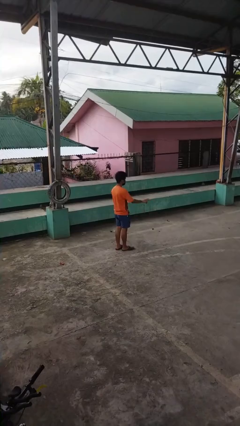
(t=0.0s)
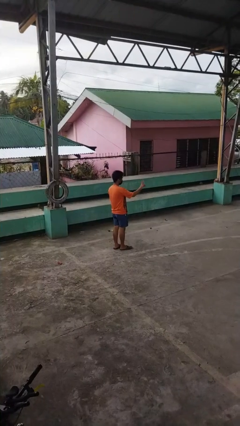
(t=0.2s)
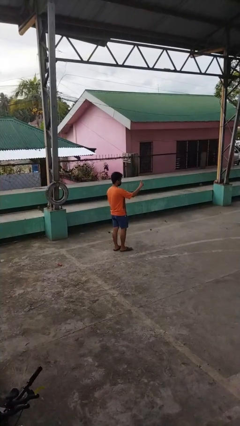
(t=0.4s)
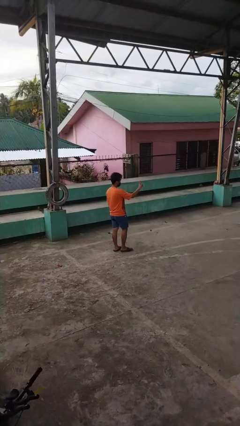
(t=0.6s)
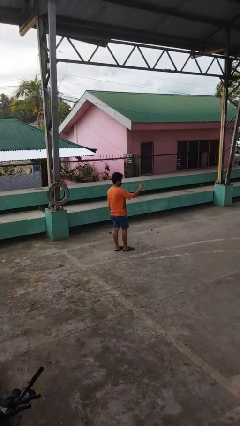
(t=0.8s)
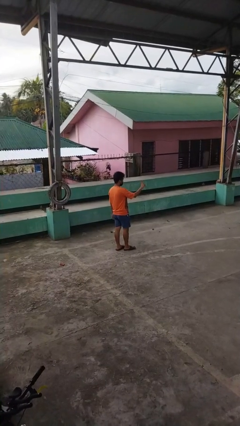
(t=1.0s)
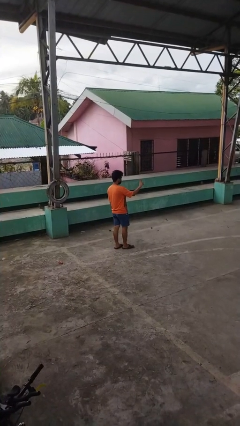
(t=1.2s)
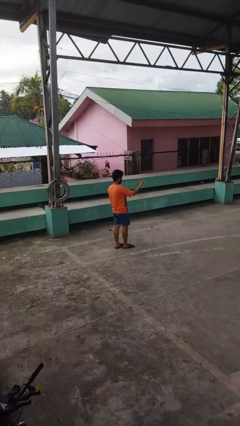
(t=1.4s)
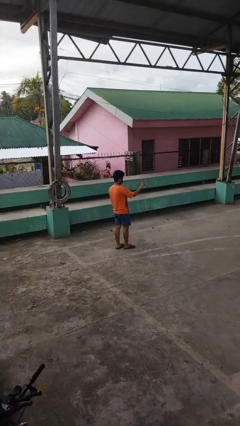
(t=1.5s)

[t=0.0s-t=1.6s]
person gestures peace

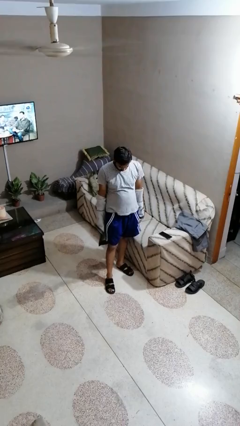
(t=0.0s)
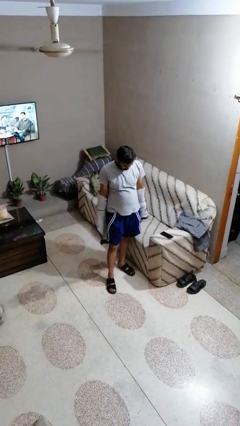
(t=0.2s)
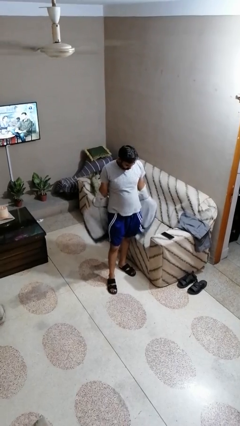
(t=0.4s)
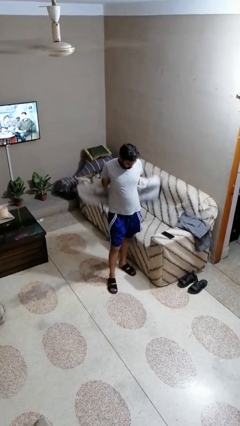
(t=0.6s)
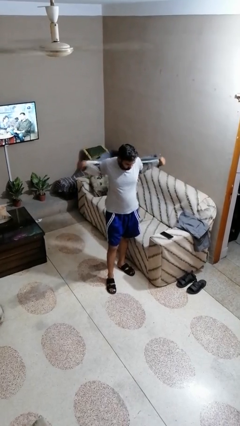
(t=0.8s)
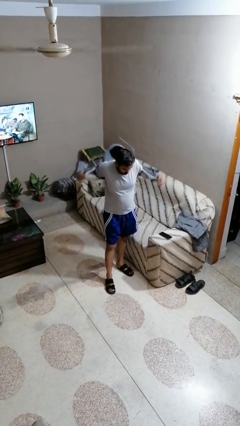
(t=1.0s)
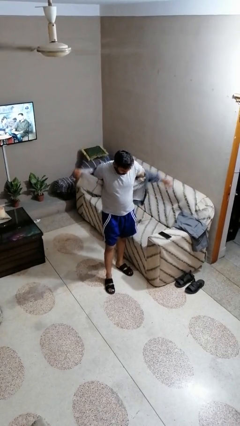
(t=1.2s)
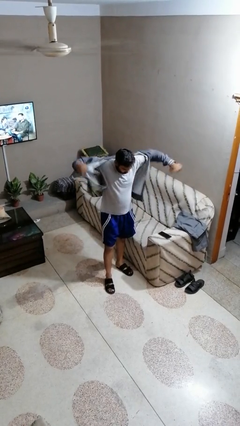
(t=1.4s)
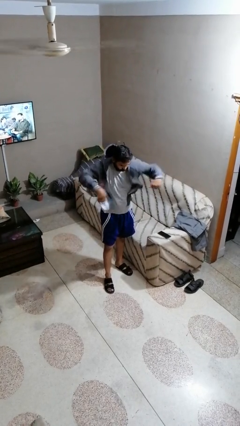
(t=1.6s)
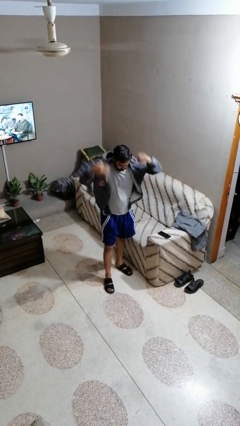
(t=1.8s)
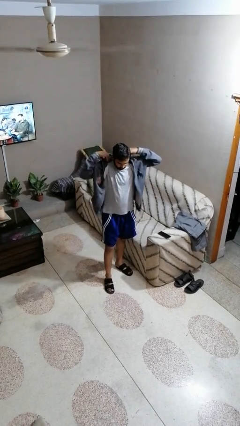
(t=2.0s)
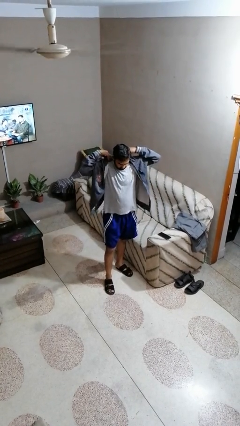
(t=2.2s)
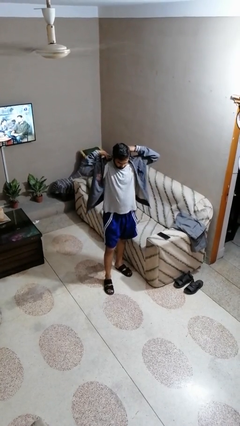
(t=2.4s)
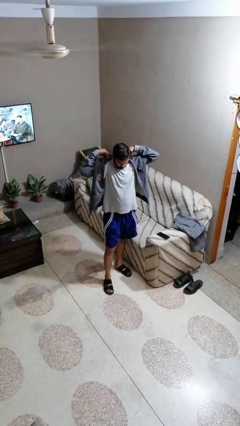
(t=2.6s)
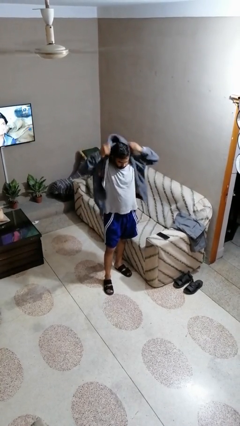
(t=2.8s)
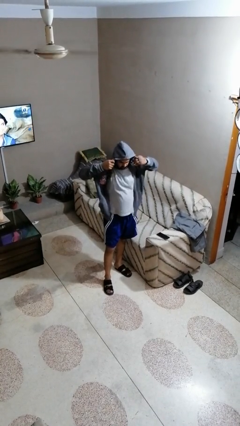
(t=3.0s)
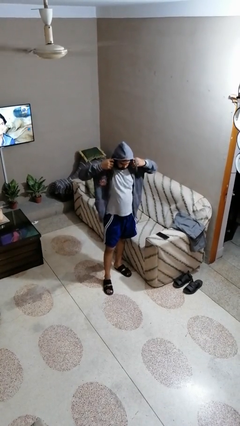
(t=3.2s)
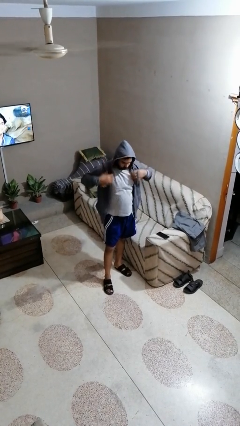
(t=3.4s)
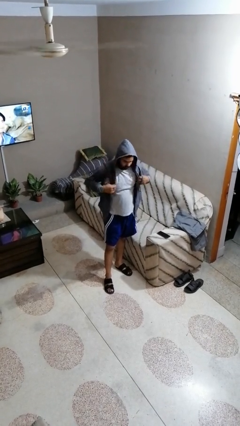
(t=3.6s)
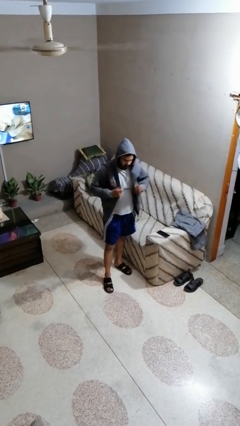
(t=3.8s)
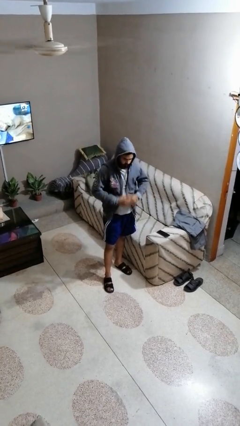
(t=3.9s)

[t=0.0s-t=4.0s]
person puts on hoodie

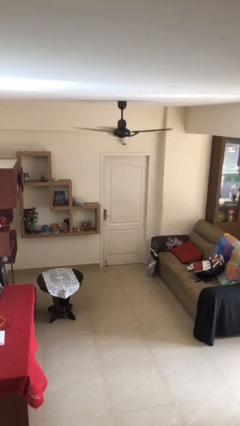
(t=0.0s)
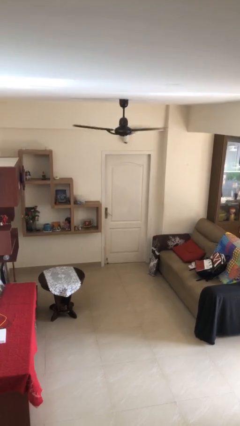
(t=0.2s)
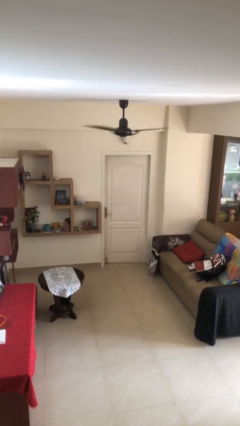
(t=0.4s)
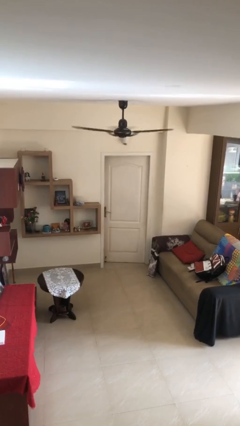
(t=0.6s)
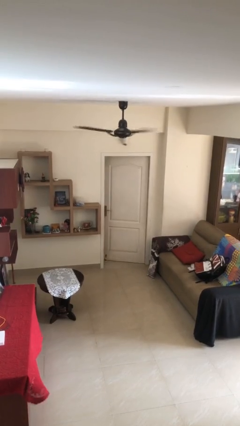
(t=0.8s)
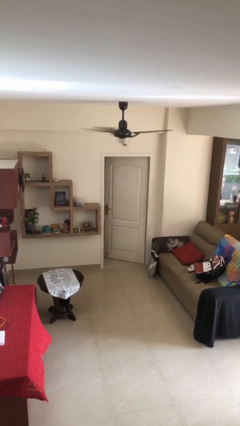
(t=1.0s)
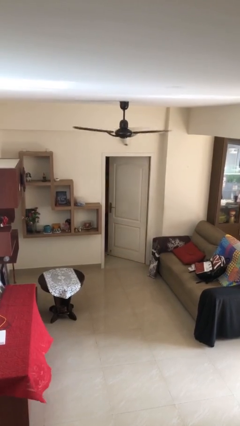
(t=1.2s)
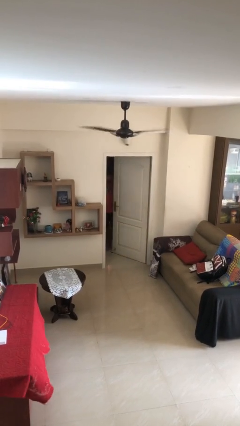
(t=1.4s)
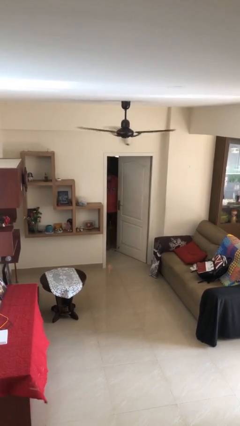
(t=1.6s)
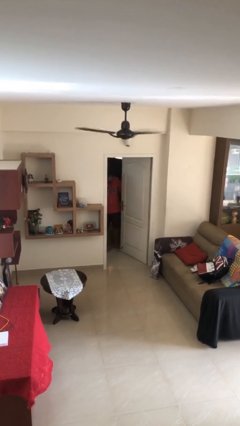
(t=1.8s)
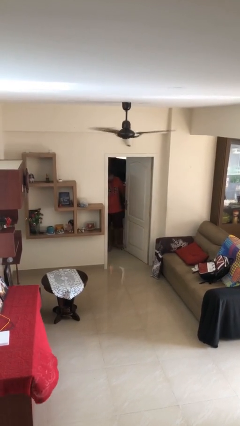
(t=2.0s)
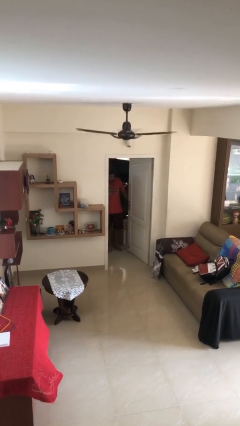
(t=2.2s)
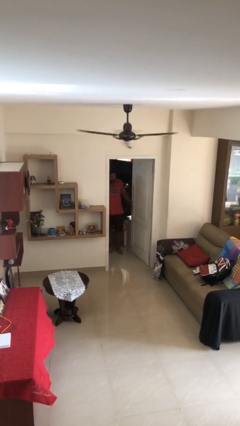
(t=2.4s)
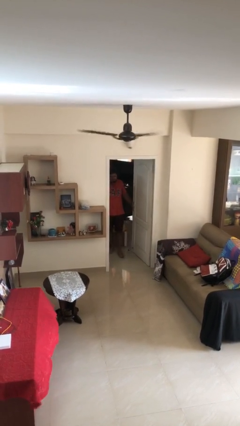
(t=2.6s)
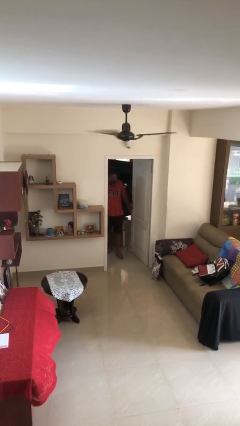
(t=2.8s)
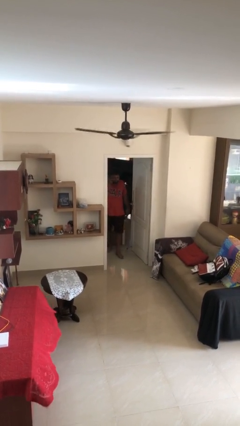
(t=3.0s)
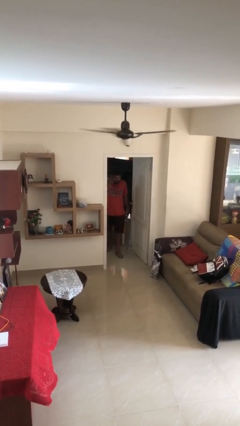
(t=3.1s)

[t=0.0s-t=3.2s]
person opens facility door

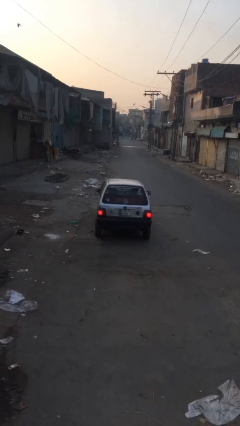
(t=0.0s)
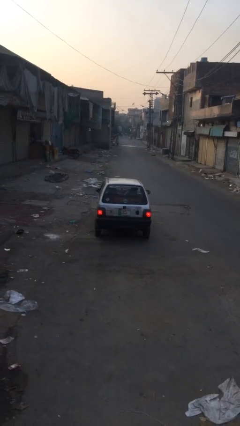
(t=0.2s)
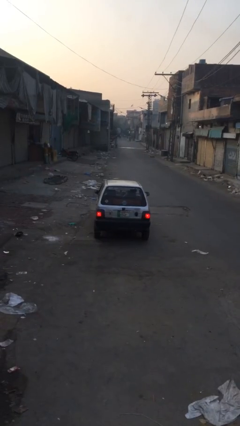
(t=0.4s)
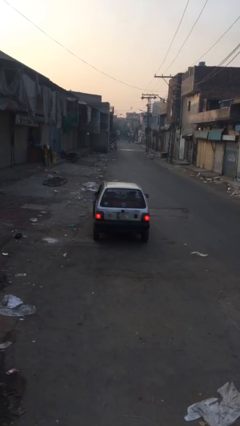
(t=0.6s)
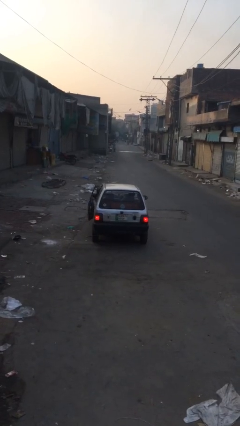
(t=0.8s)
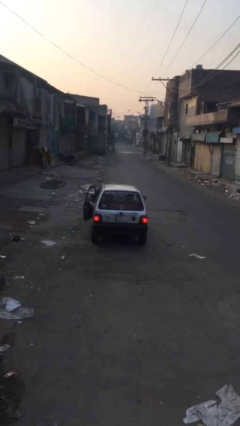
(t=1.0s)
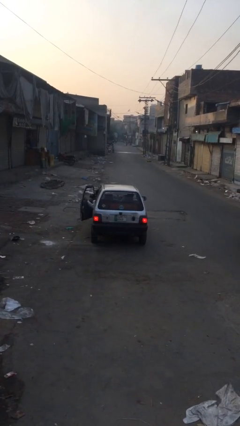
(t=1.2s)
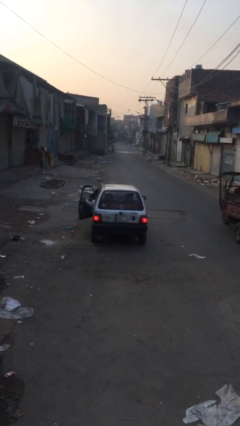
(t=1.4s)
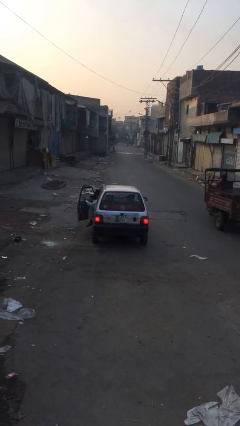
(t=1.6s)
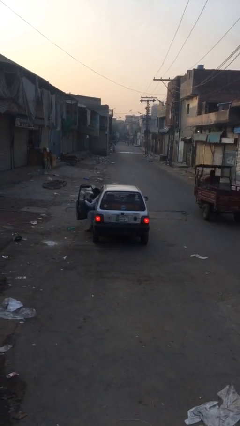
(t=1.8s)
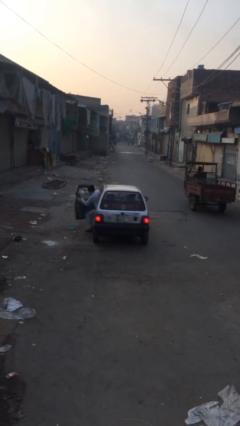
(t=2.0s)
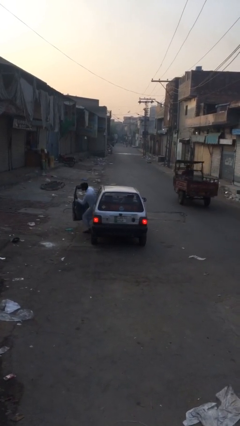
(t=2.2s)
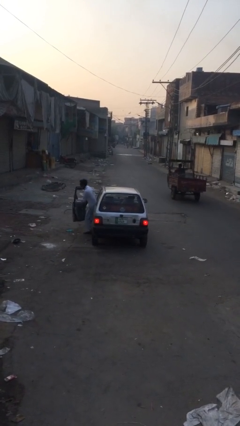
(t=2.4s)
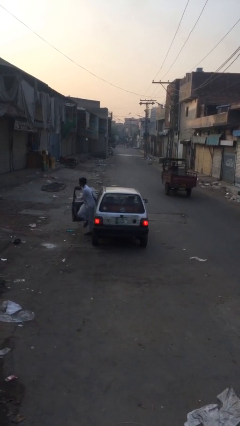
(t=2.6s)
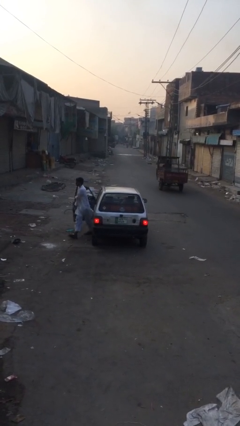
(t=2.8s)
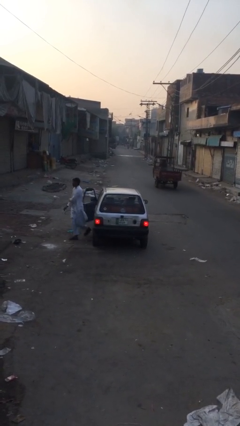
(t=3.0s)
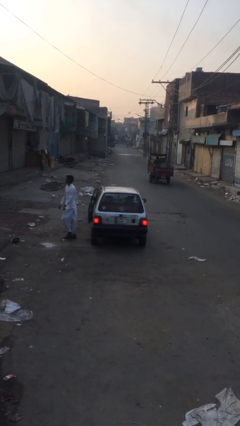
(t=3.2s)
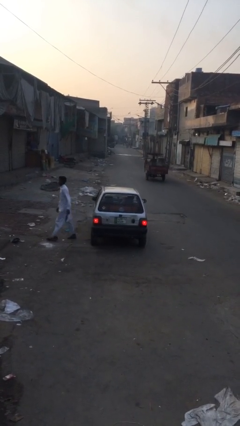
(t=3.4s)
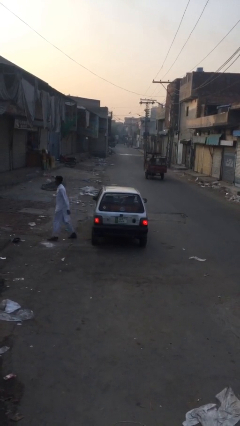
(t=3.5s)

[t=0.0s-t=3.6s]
car drops off person

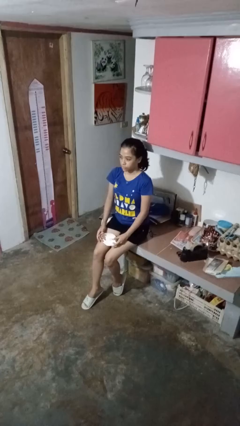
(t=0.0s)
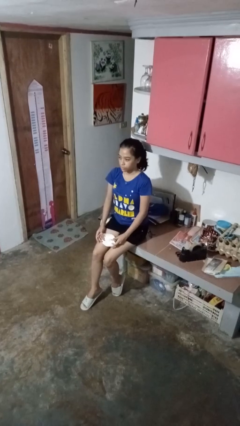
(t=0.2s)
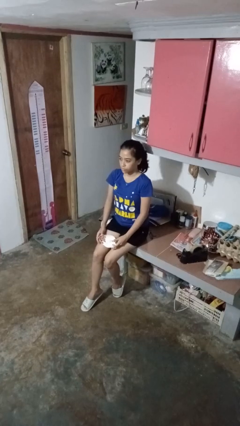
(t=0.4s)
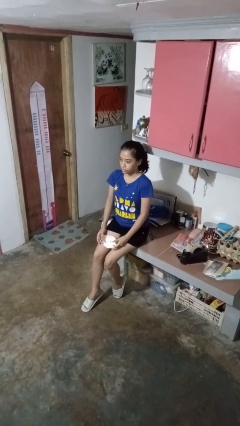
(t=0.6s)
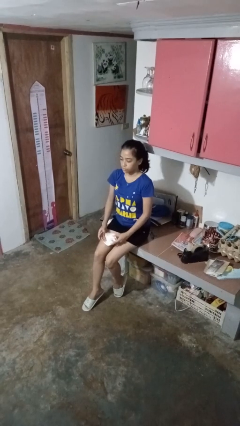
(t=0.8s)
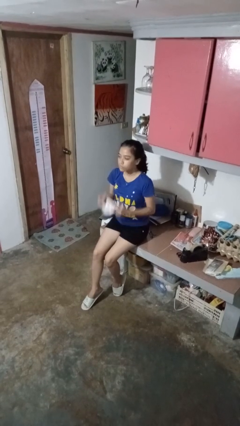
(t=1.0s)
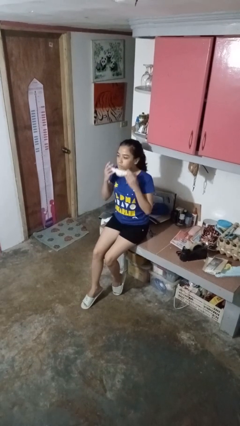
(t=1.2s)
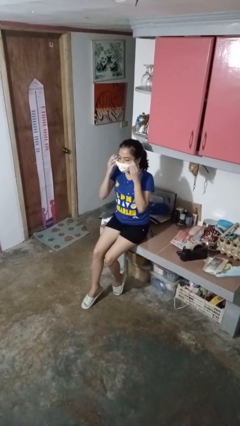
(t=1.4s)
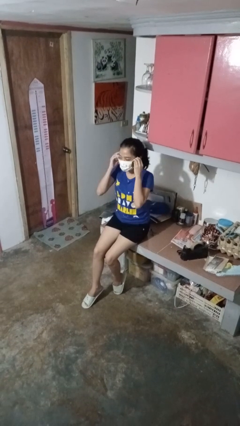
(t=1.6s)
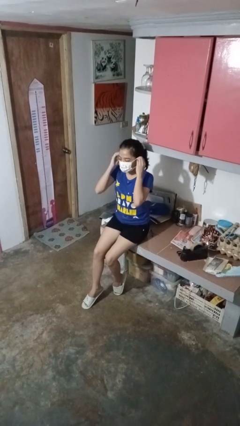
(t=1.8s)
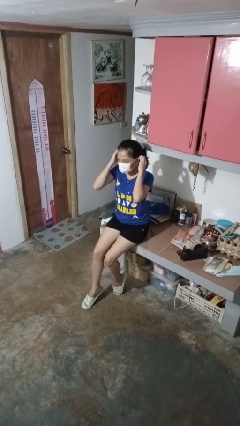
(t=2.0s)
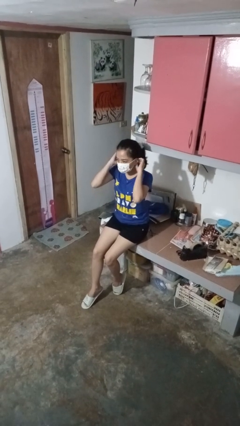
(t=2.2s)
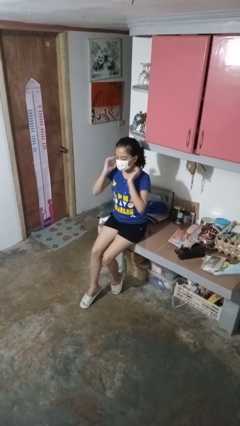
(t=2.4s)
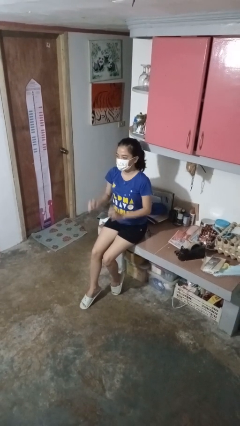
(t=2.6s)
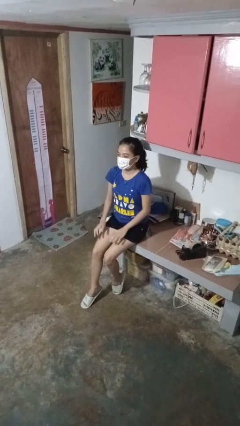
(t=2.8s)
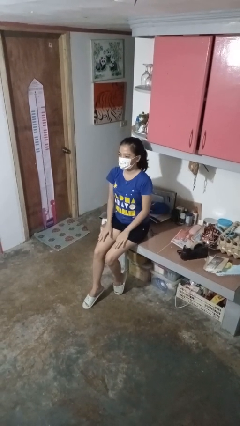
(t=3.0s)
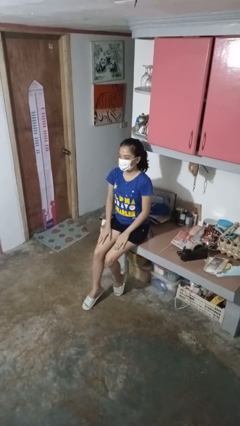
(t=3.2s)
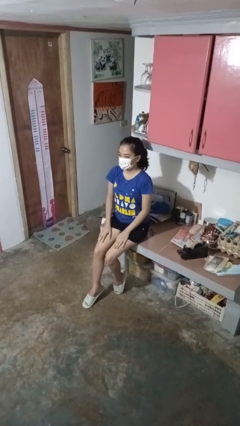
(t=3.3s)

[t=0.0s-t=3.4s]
person puts on facemask

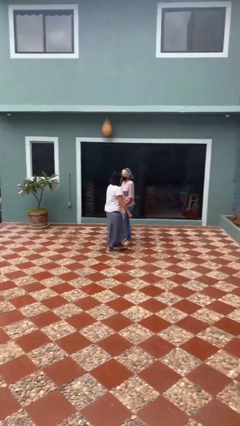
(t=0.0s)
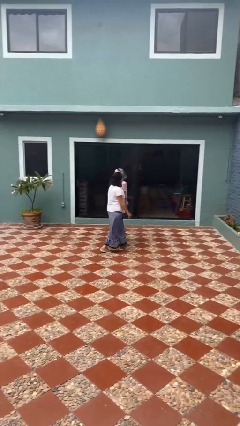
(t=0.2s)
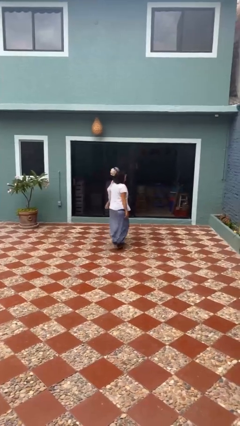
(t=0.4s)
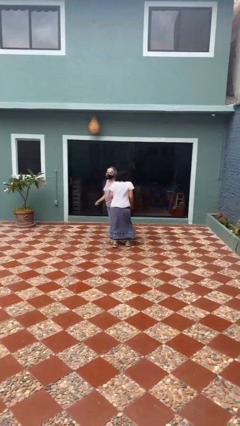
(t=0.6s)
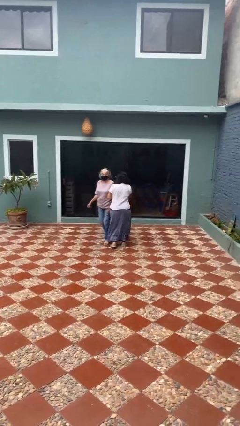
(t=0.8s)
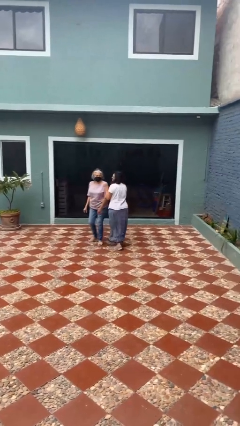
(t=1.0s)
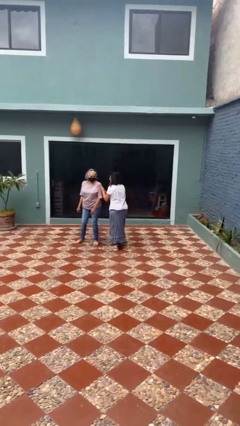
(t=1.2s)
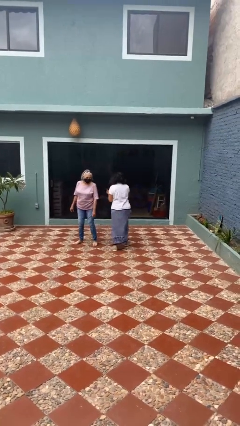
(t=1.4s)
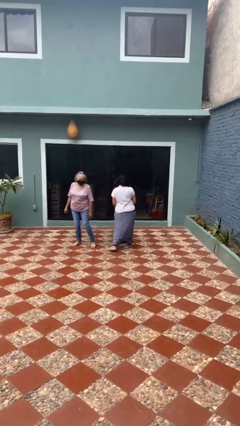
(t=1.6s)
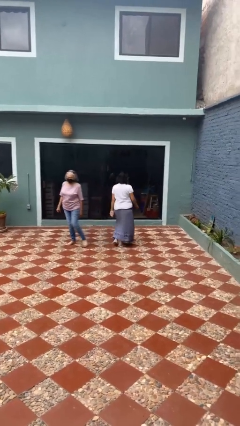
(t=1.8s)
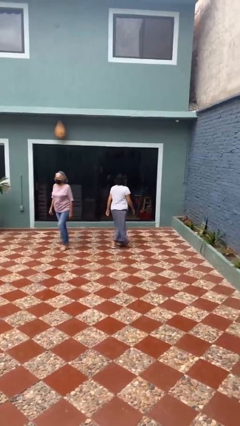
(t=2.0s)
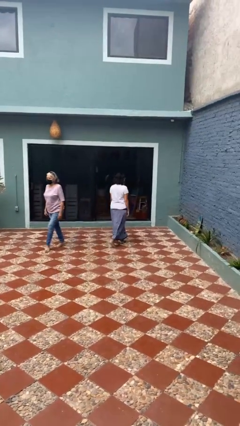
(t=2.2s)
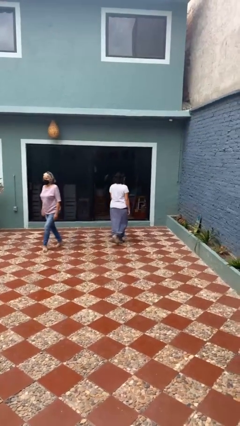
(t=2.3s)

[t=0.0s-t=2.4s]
person bumps into person
